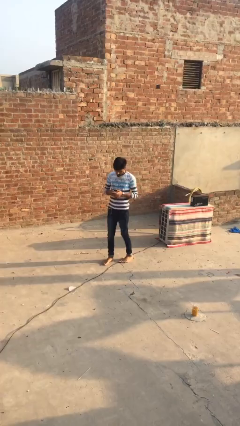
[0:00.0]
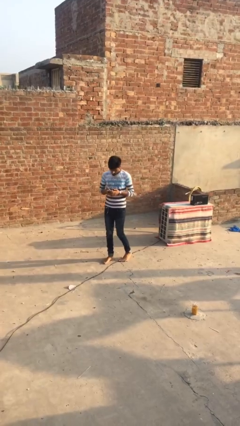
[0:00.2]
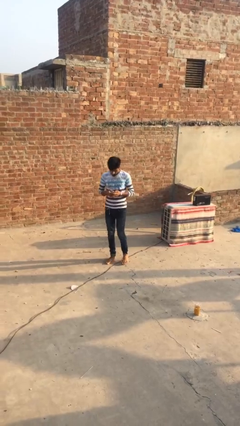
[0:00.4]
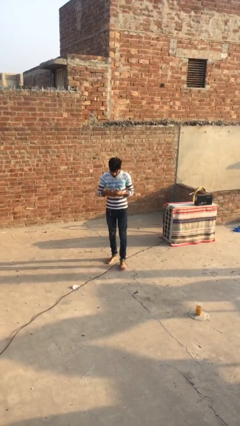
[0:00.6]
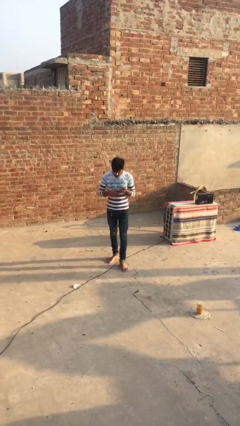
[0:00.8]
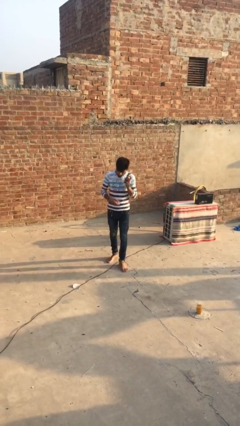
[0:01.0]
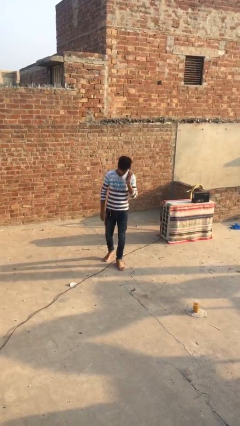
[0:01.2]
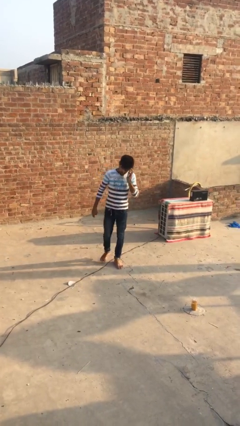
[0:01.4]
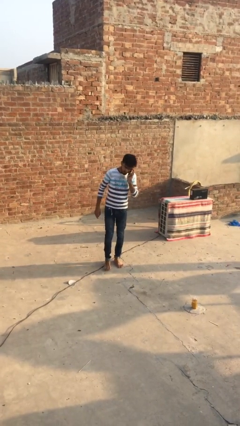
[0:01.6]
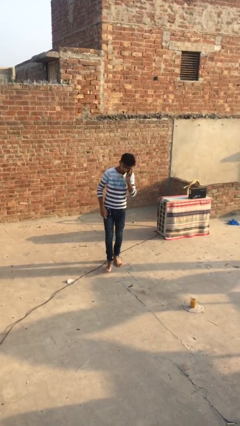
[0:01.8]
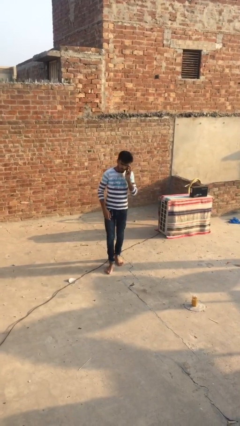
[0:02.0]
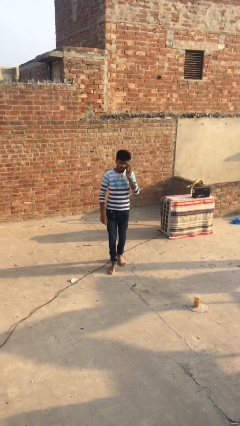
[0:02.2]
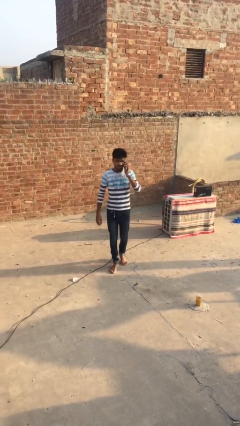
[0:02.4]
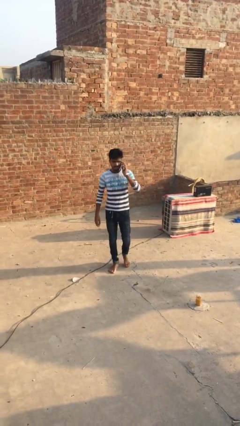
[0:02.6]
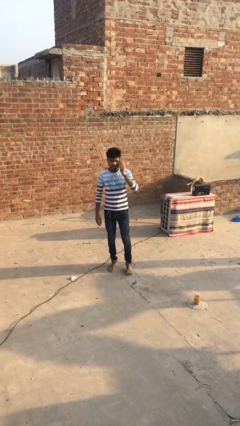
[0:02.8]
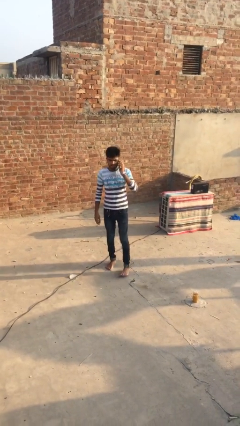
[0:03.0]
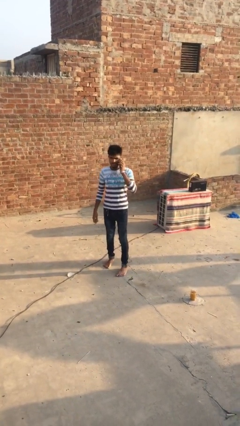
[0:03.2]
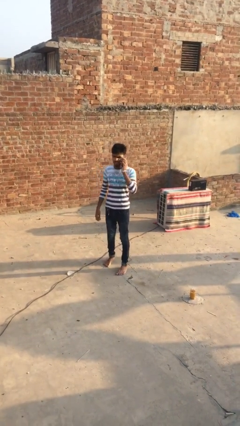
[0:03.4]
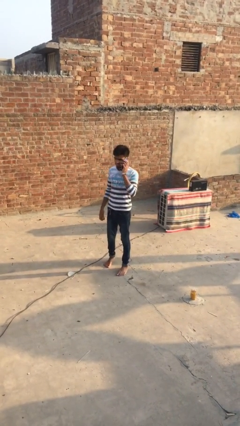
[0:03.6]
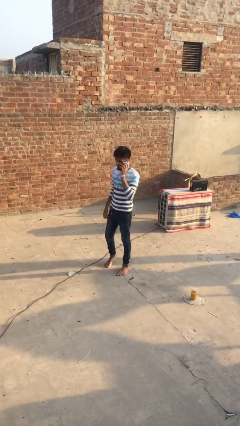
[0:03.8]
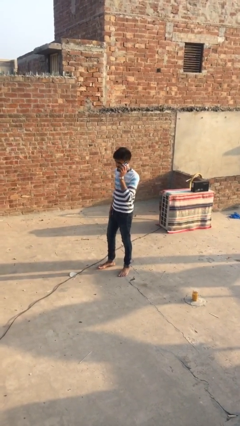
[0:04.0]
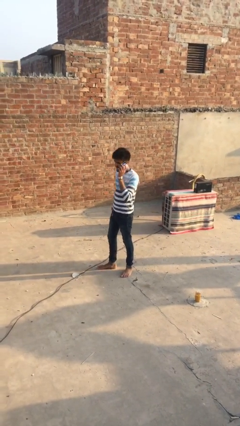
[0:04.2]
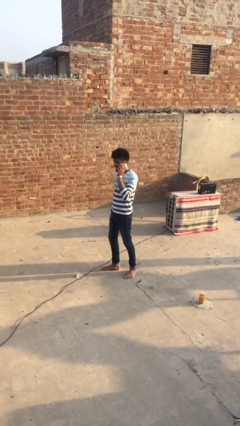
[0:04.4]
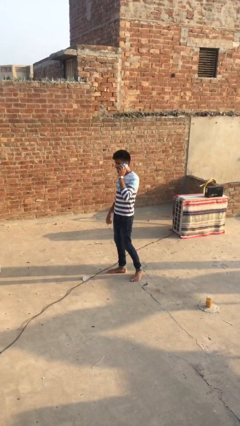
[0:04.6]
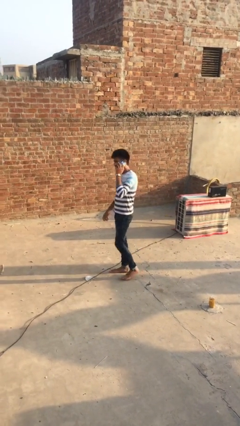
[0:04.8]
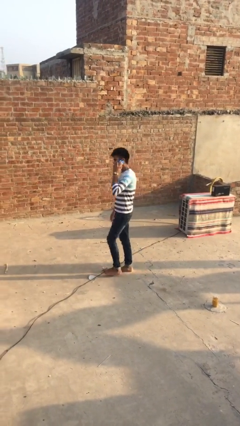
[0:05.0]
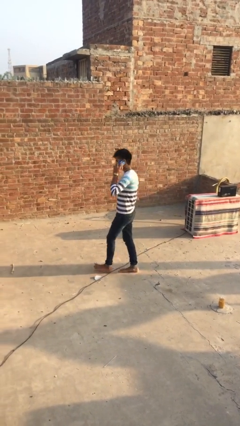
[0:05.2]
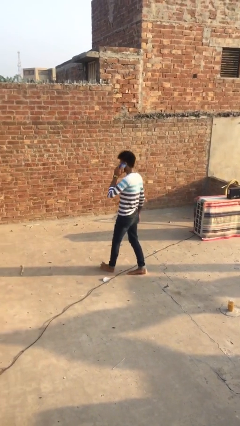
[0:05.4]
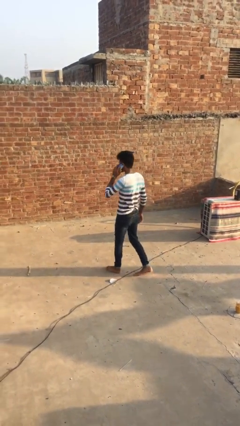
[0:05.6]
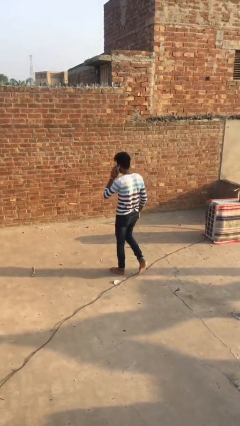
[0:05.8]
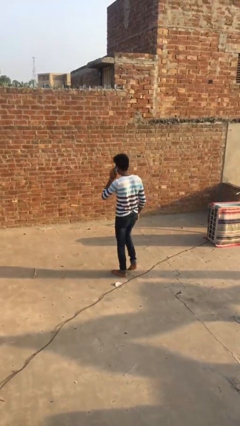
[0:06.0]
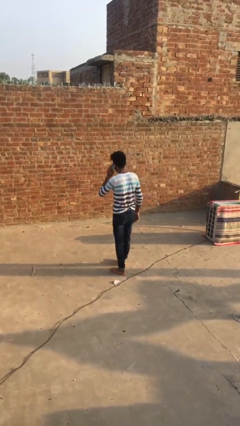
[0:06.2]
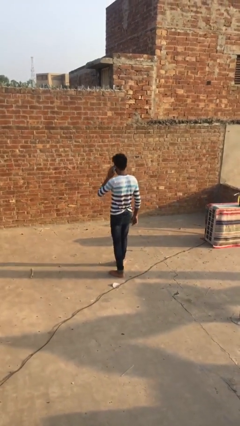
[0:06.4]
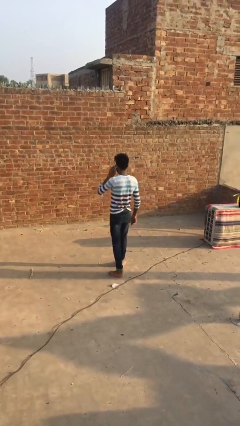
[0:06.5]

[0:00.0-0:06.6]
person talks on phone

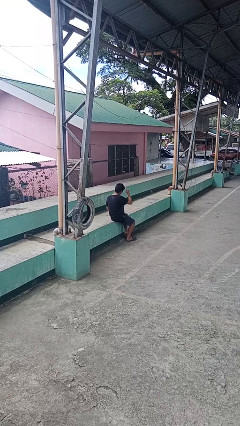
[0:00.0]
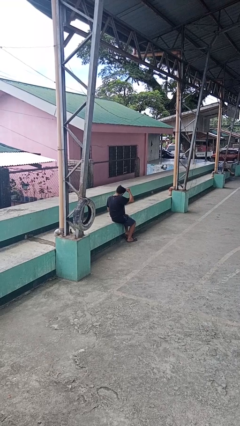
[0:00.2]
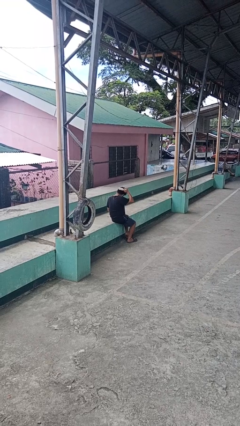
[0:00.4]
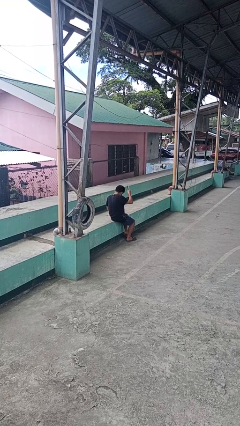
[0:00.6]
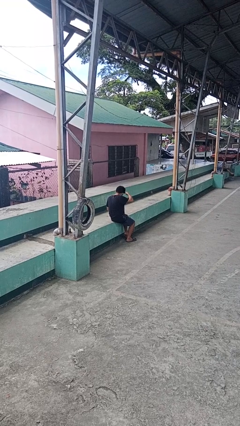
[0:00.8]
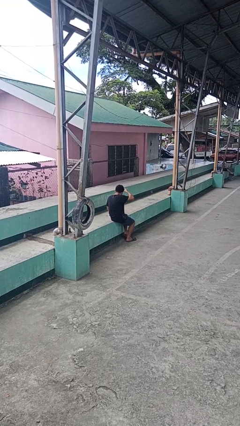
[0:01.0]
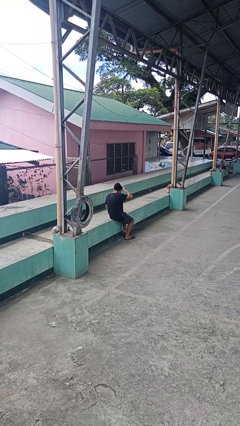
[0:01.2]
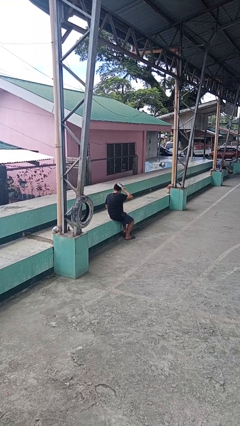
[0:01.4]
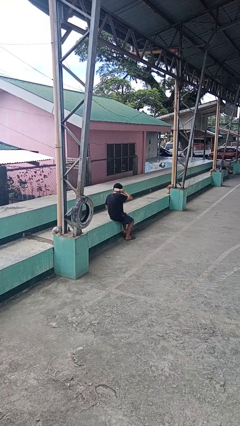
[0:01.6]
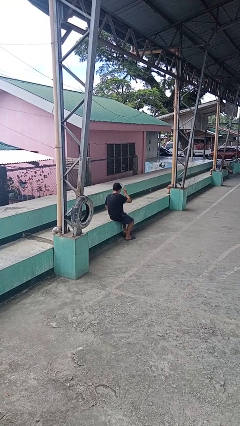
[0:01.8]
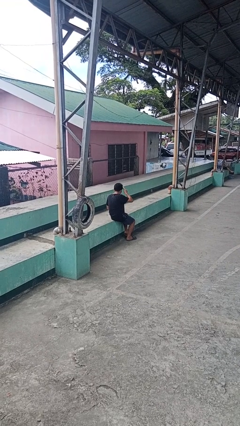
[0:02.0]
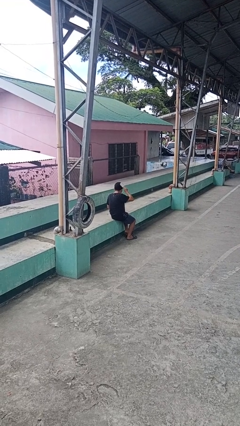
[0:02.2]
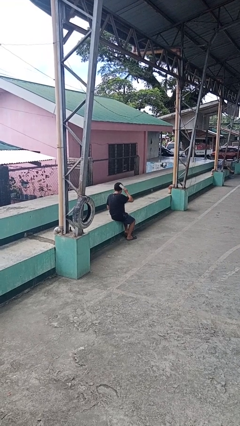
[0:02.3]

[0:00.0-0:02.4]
person brushes hair

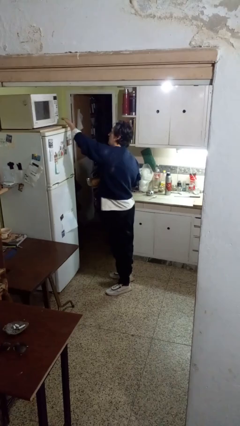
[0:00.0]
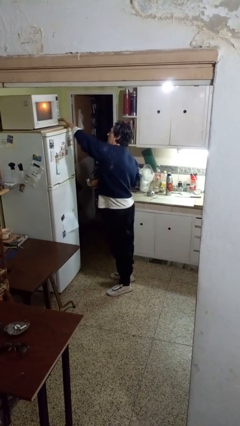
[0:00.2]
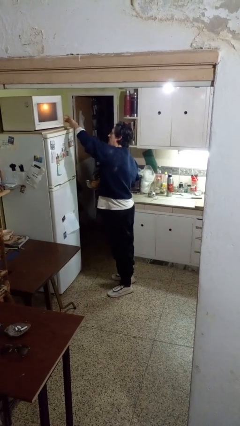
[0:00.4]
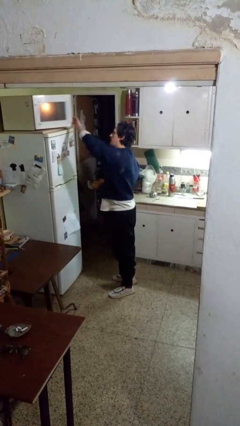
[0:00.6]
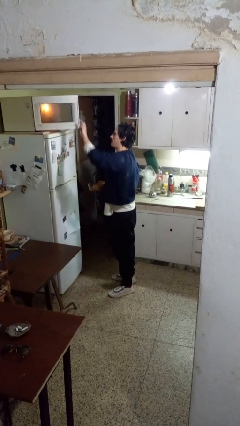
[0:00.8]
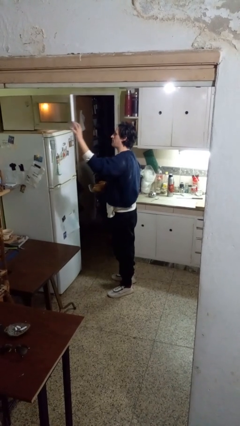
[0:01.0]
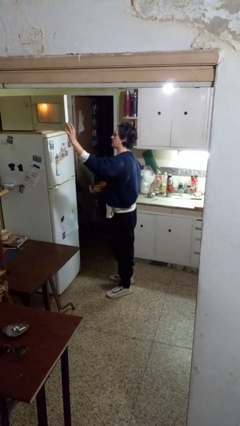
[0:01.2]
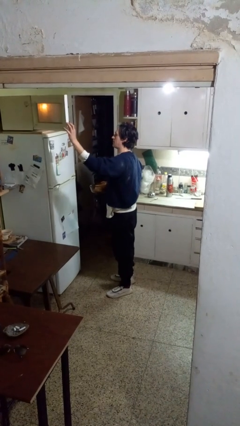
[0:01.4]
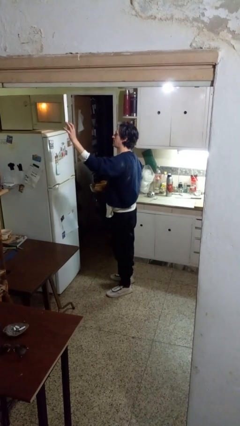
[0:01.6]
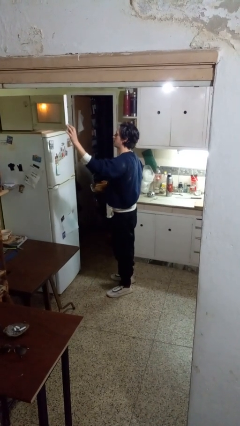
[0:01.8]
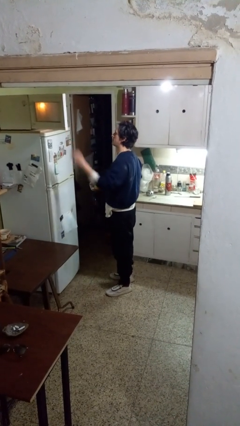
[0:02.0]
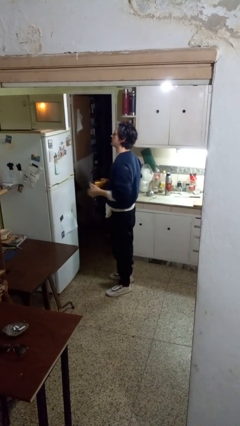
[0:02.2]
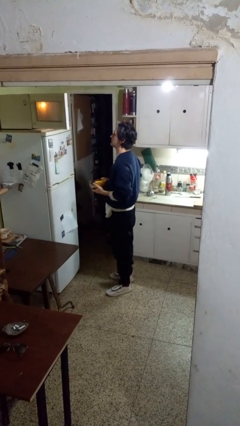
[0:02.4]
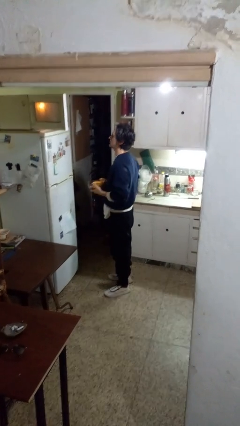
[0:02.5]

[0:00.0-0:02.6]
person opens microwave

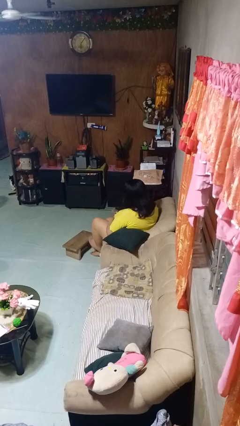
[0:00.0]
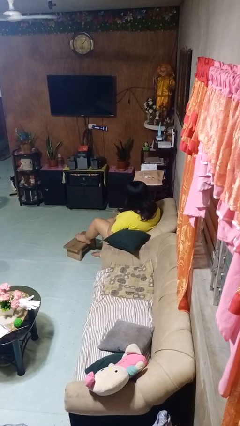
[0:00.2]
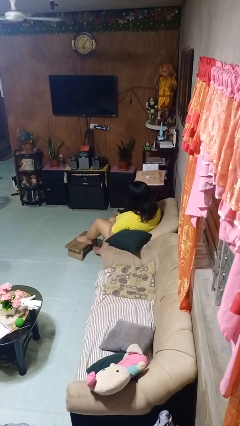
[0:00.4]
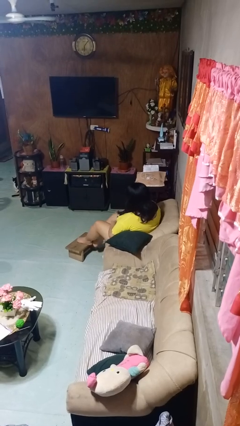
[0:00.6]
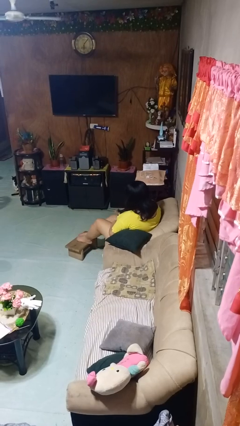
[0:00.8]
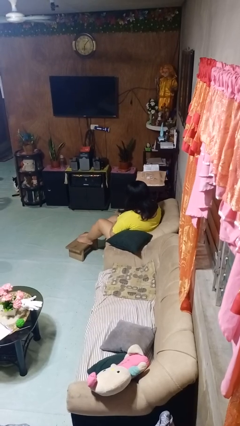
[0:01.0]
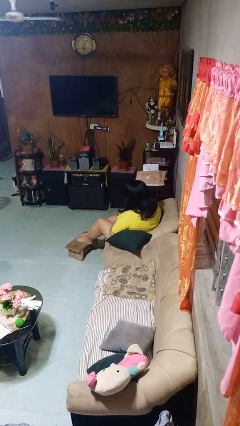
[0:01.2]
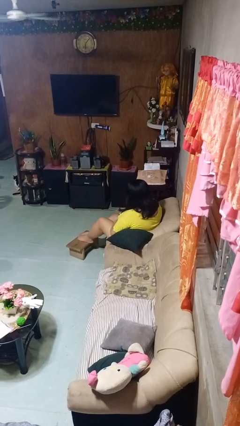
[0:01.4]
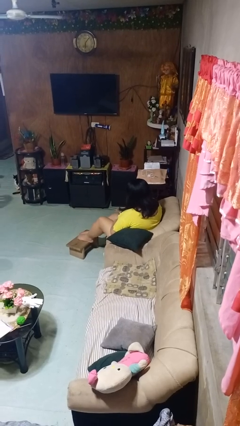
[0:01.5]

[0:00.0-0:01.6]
person puts feet up

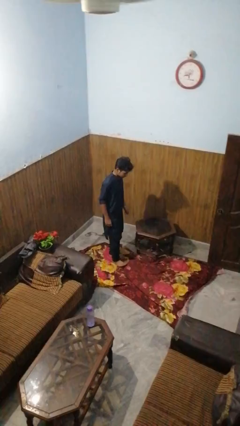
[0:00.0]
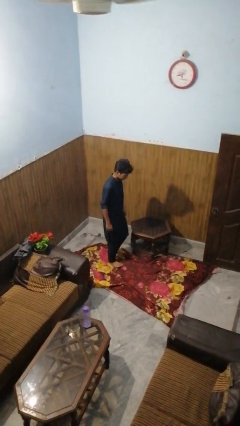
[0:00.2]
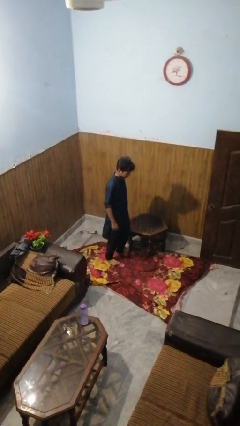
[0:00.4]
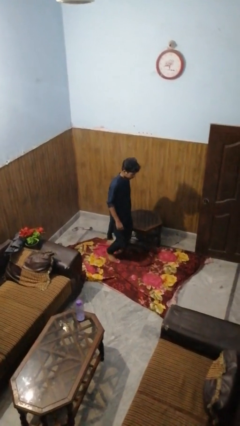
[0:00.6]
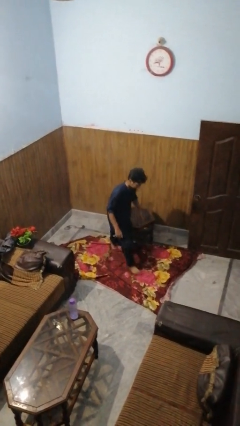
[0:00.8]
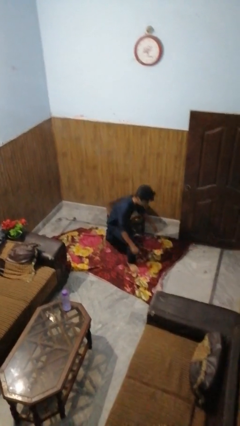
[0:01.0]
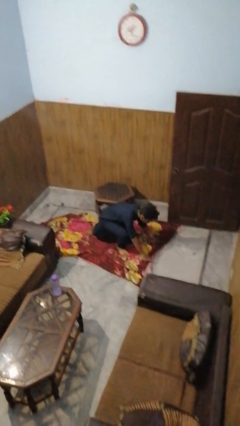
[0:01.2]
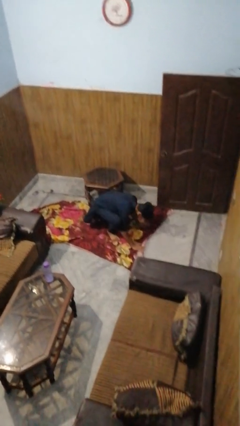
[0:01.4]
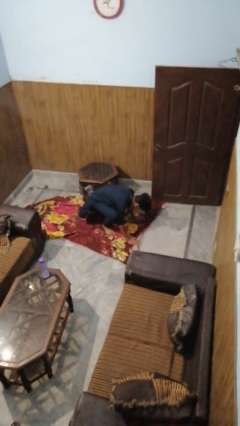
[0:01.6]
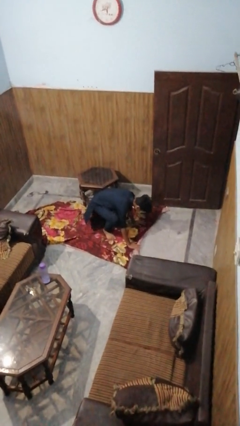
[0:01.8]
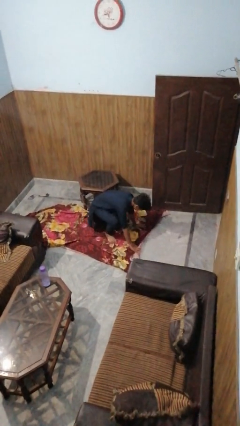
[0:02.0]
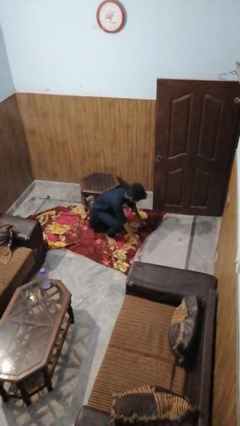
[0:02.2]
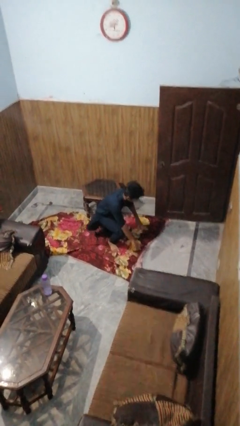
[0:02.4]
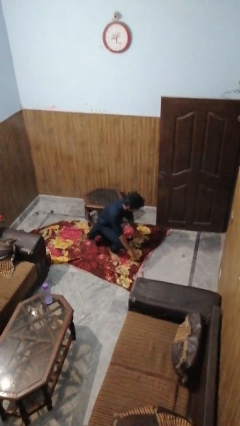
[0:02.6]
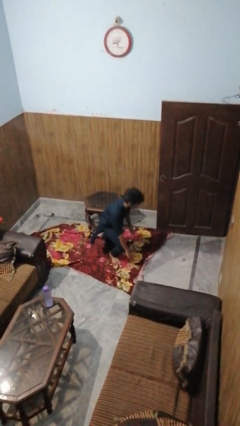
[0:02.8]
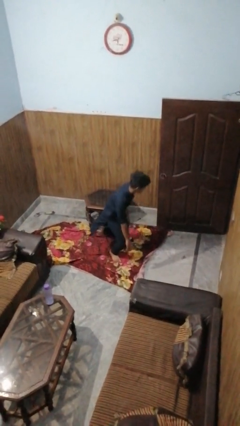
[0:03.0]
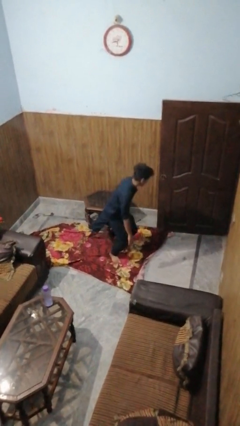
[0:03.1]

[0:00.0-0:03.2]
person bumps into table

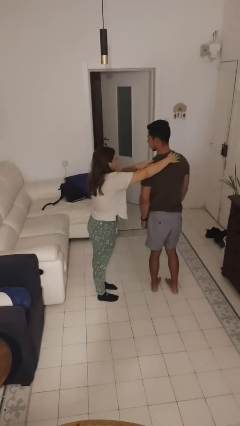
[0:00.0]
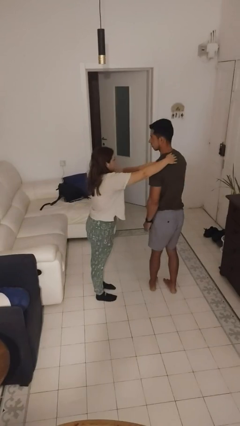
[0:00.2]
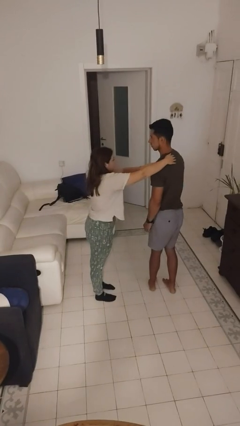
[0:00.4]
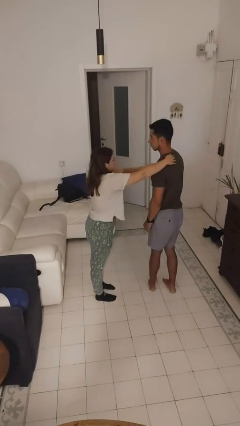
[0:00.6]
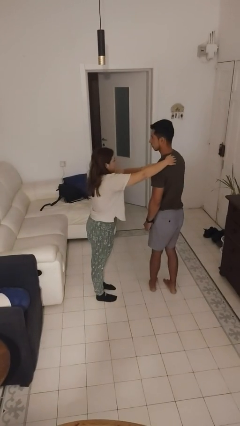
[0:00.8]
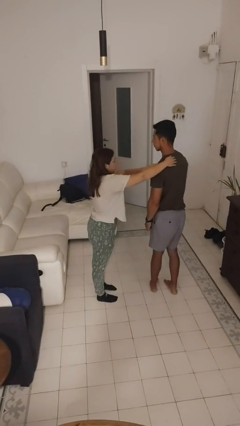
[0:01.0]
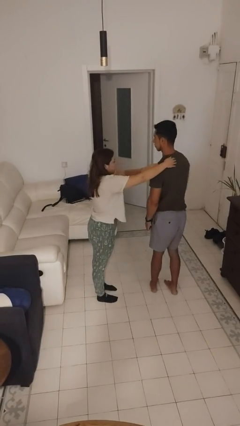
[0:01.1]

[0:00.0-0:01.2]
person spins person around
